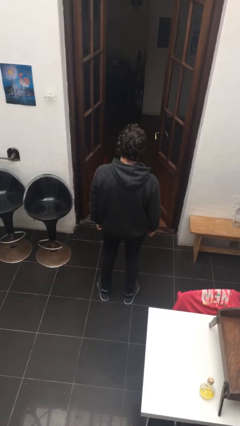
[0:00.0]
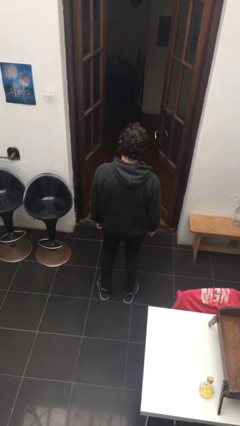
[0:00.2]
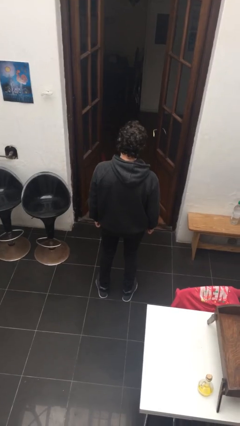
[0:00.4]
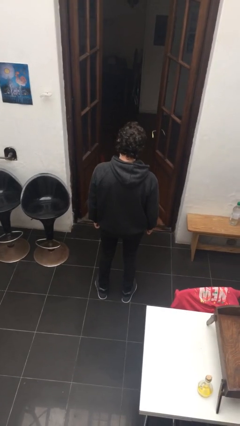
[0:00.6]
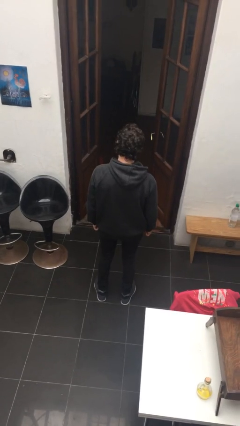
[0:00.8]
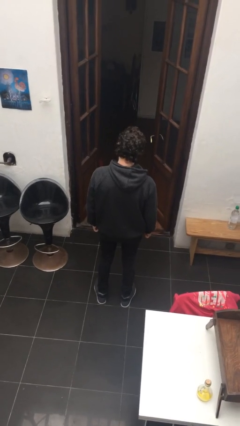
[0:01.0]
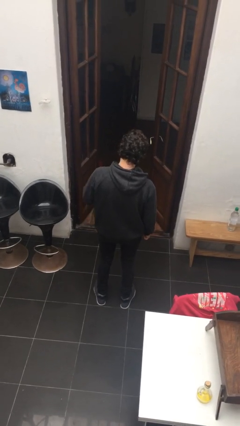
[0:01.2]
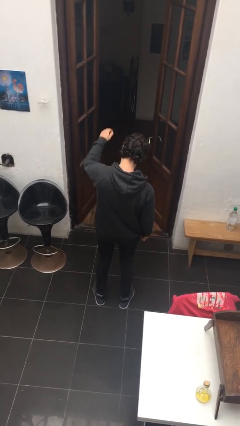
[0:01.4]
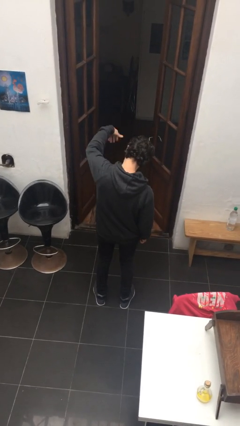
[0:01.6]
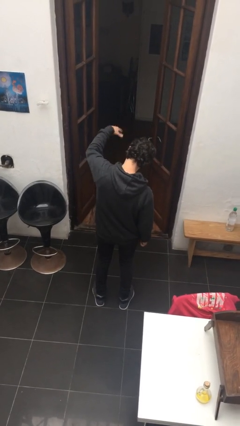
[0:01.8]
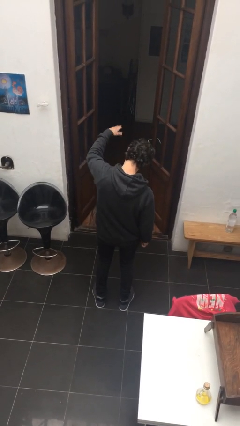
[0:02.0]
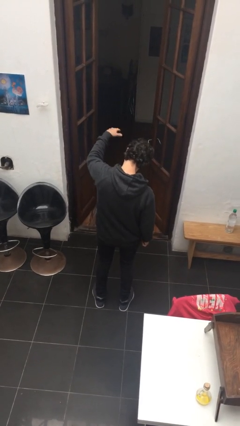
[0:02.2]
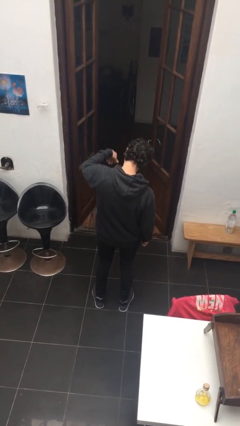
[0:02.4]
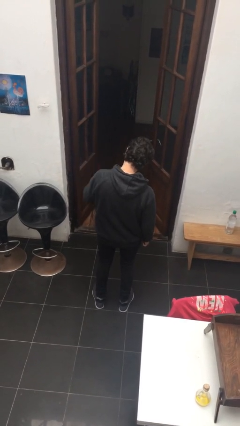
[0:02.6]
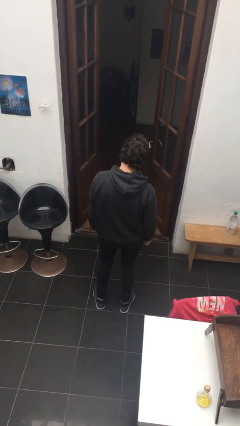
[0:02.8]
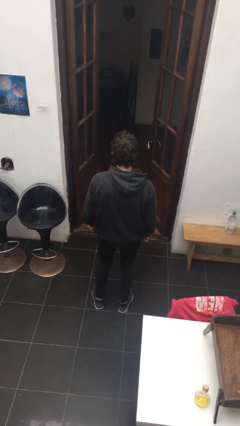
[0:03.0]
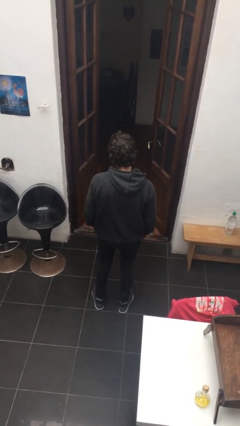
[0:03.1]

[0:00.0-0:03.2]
person gestures come here

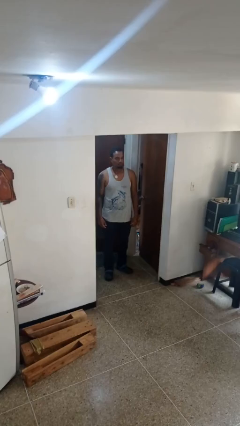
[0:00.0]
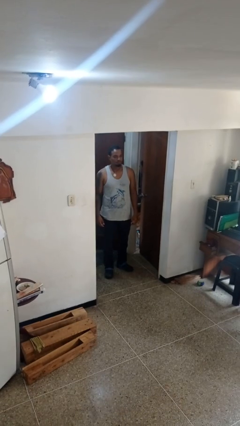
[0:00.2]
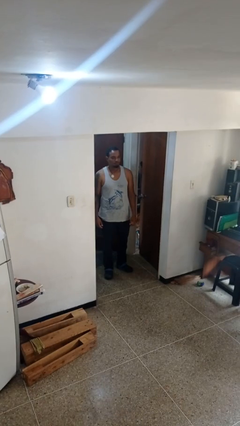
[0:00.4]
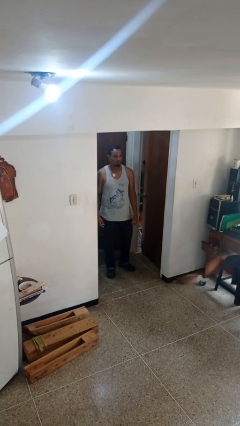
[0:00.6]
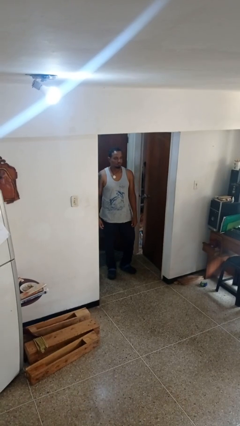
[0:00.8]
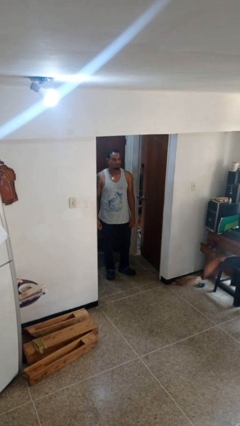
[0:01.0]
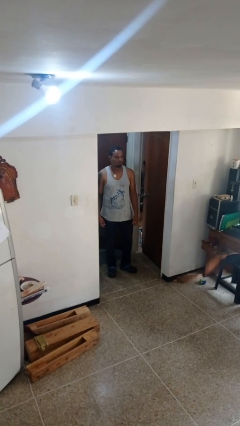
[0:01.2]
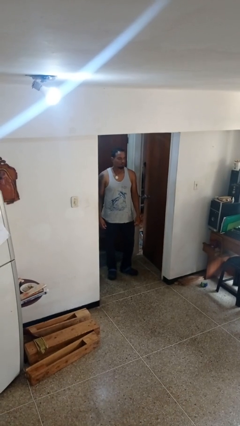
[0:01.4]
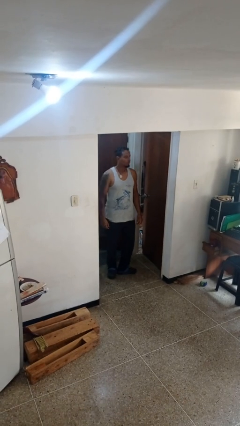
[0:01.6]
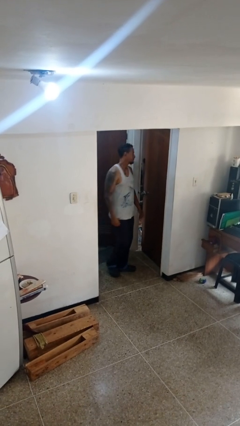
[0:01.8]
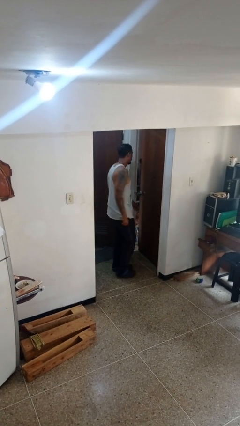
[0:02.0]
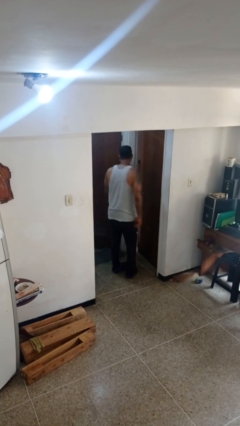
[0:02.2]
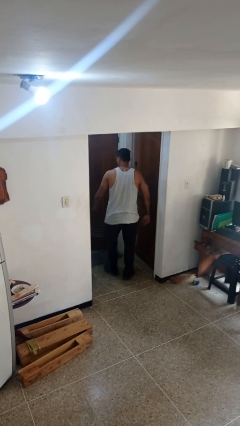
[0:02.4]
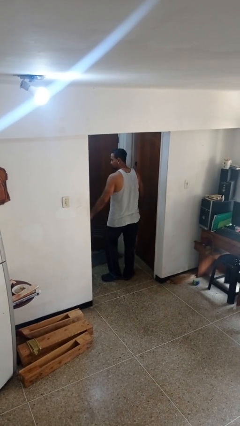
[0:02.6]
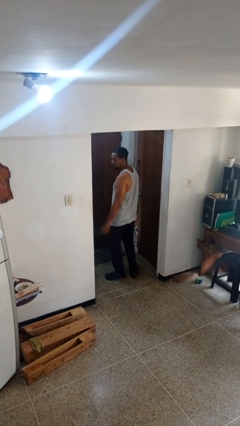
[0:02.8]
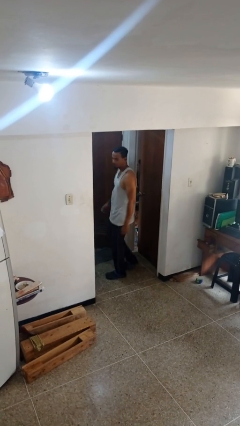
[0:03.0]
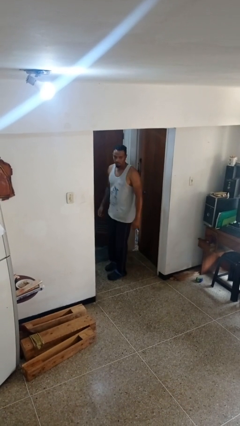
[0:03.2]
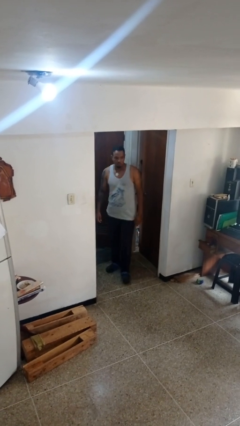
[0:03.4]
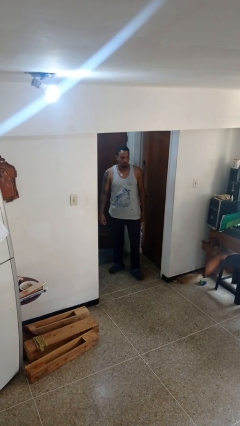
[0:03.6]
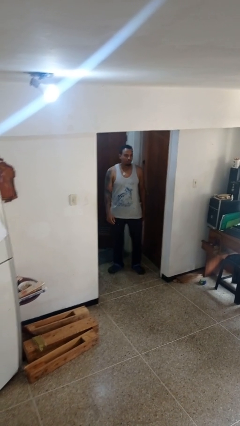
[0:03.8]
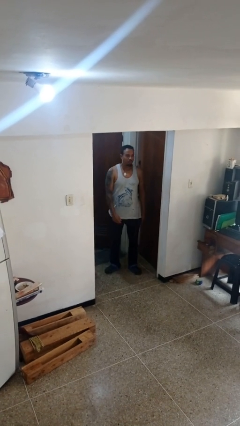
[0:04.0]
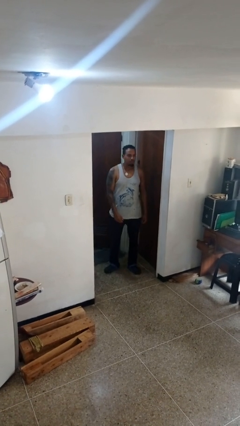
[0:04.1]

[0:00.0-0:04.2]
person twirls

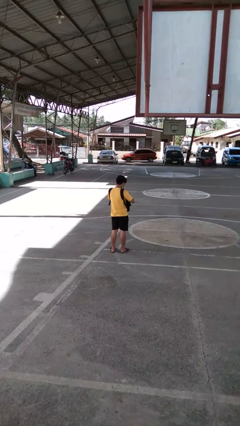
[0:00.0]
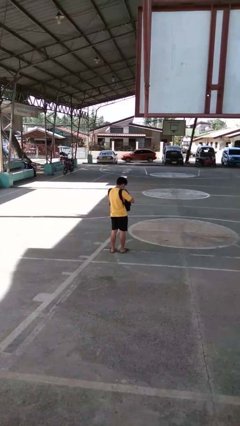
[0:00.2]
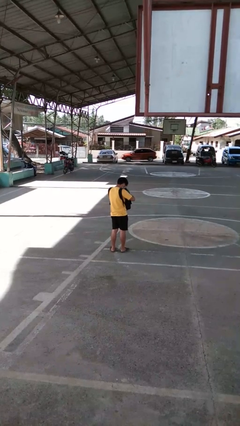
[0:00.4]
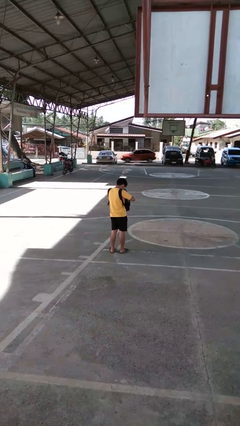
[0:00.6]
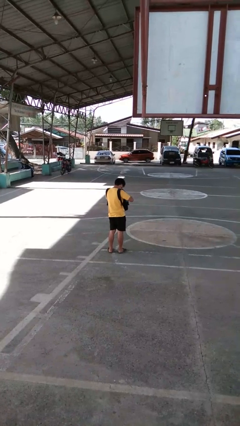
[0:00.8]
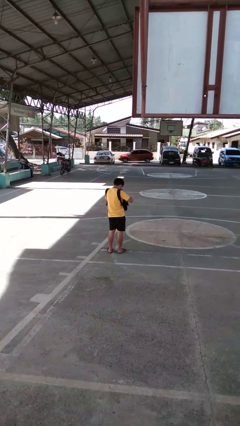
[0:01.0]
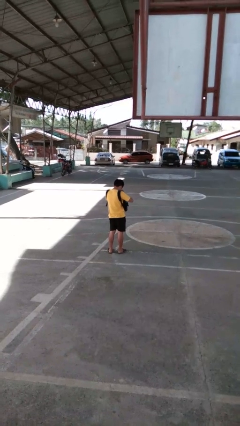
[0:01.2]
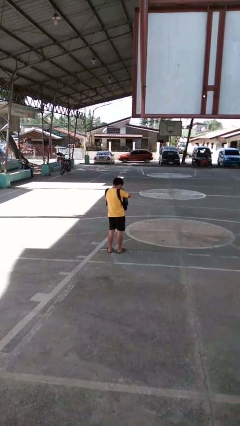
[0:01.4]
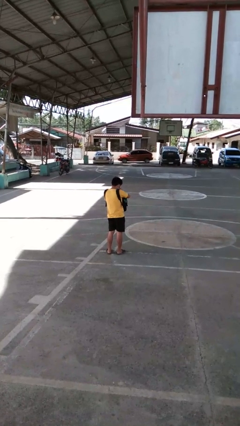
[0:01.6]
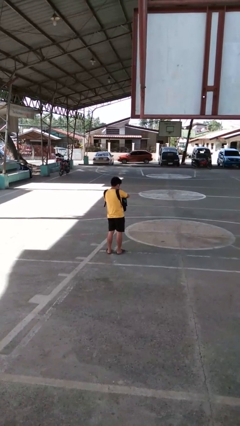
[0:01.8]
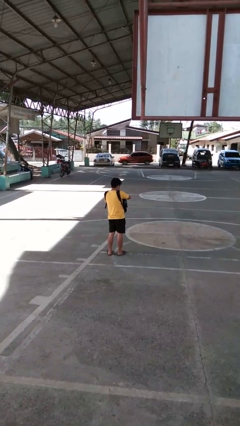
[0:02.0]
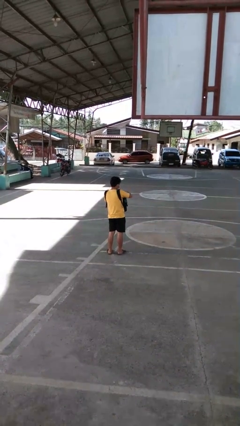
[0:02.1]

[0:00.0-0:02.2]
person searches in backpack

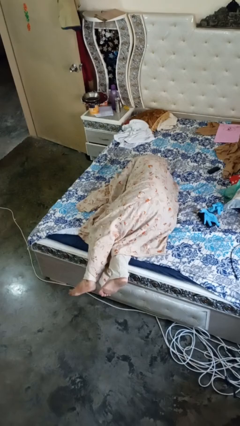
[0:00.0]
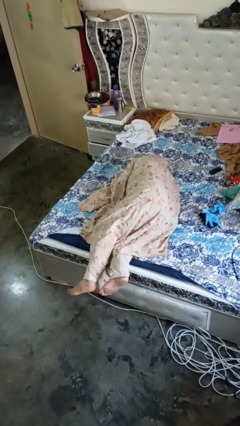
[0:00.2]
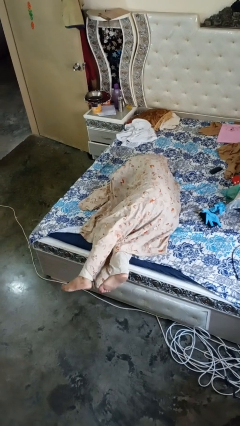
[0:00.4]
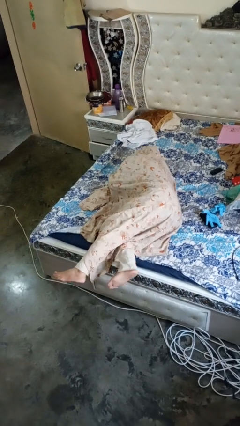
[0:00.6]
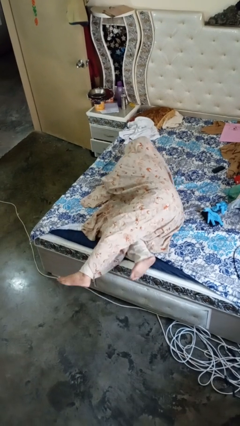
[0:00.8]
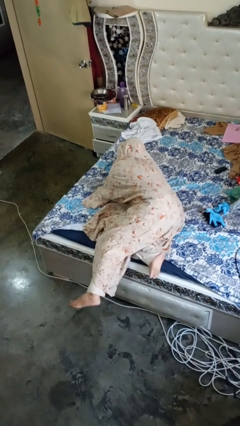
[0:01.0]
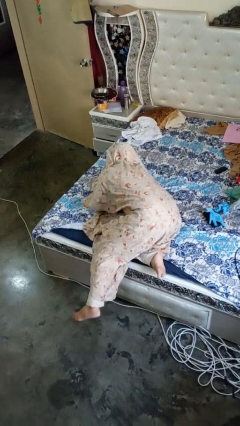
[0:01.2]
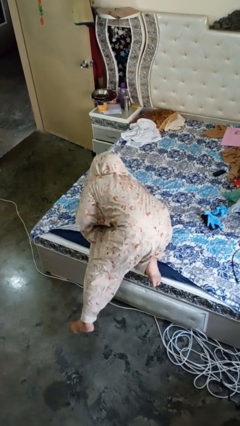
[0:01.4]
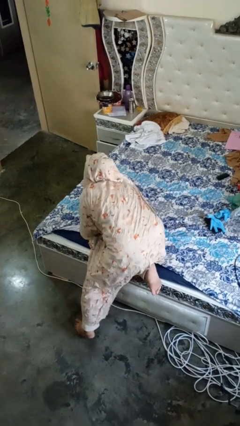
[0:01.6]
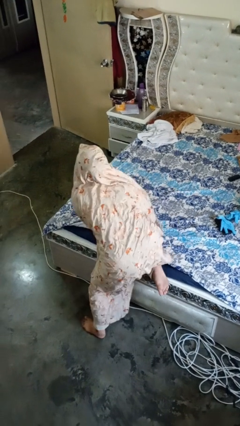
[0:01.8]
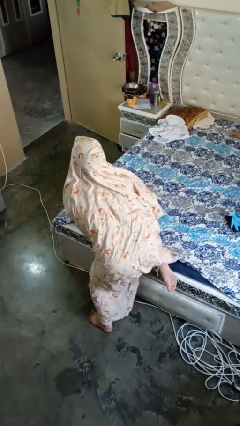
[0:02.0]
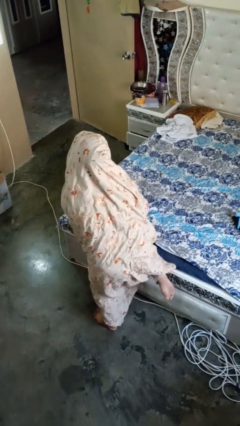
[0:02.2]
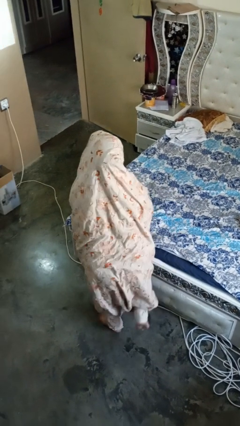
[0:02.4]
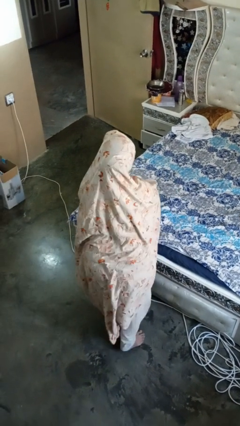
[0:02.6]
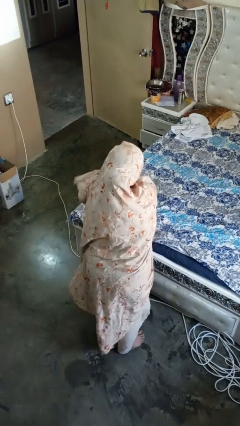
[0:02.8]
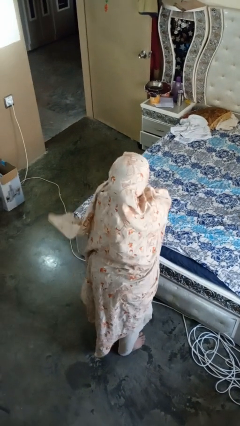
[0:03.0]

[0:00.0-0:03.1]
person stands up

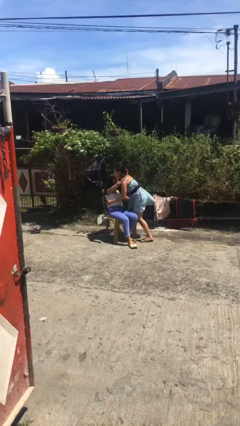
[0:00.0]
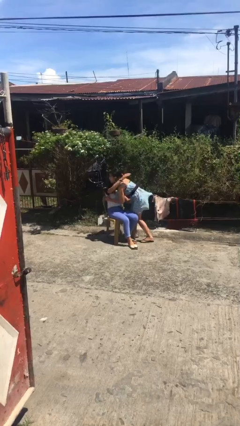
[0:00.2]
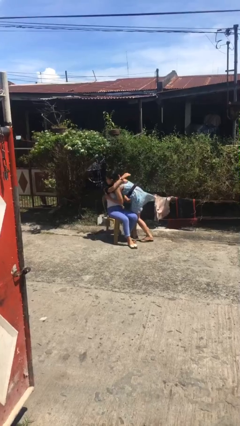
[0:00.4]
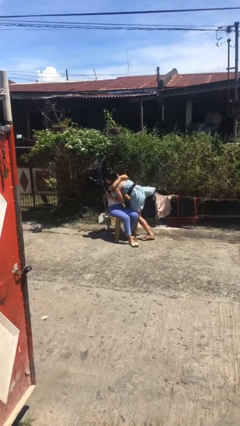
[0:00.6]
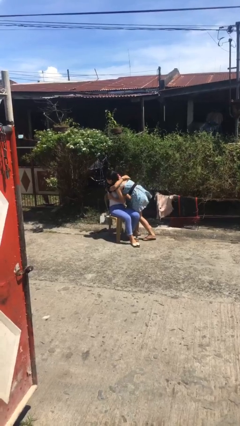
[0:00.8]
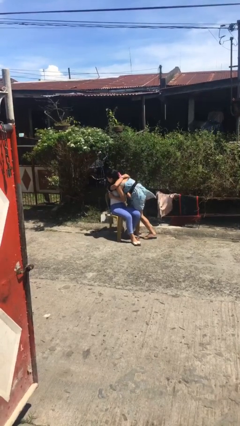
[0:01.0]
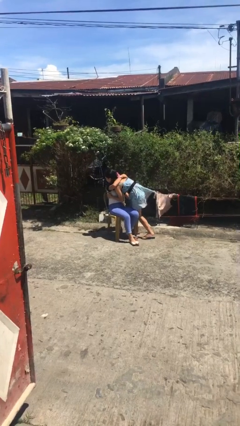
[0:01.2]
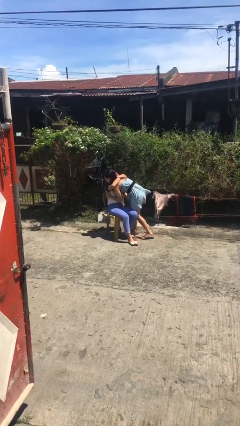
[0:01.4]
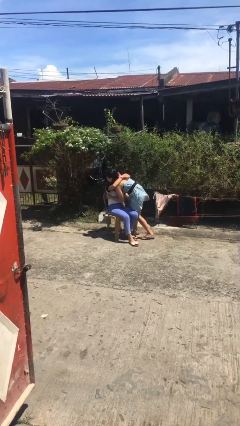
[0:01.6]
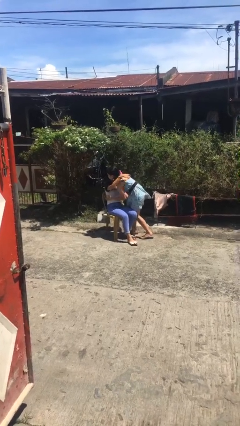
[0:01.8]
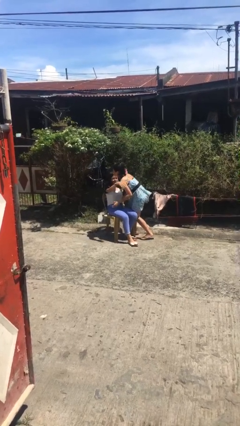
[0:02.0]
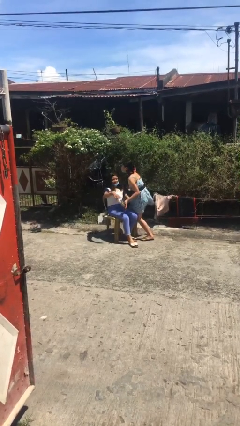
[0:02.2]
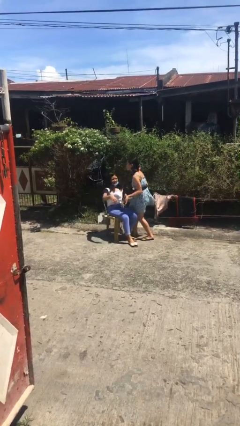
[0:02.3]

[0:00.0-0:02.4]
person embraces person

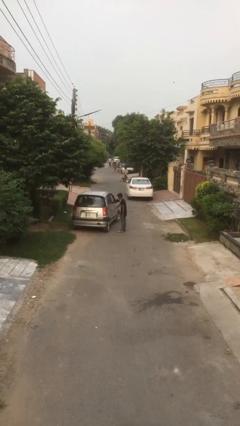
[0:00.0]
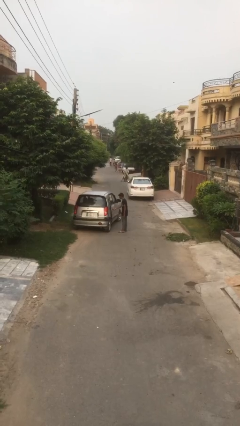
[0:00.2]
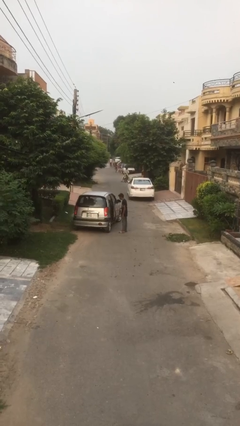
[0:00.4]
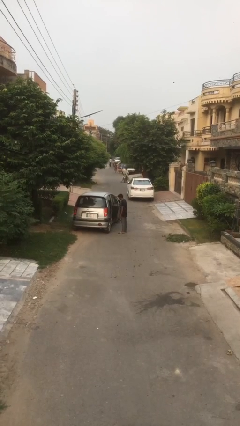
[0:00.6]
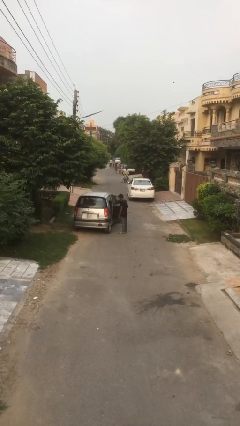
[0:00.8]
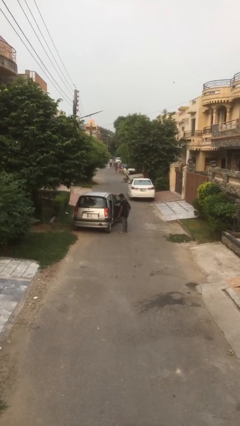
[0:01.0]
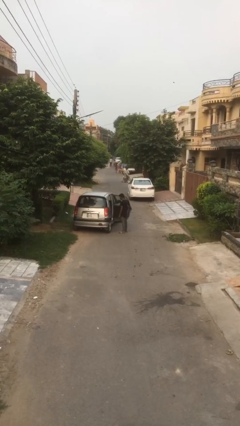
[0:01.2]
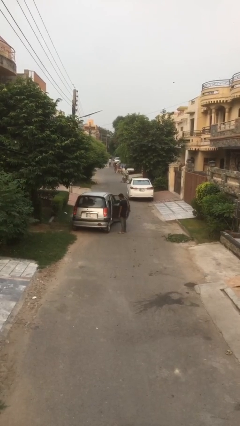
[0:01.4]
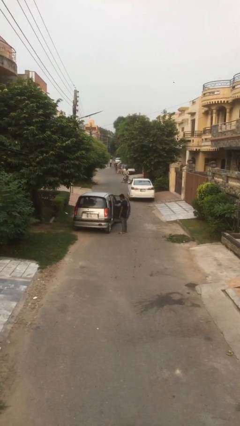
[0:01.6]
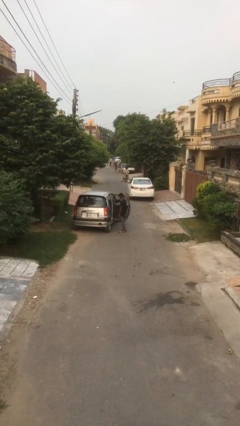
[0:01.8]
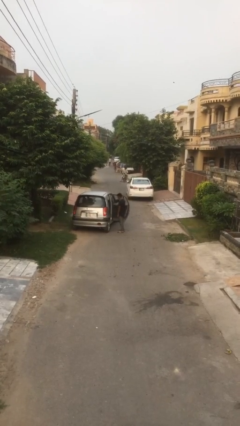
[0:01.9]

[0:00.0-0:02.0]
person opens car door
